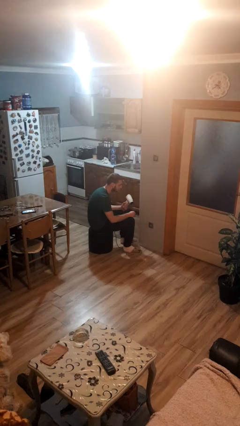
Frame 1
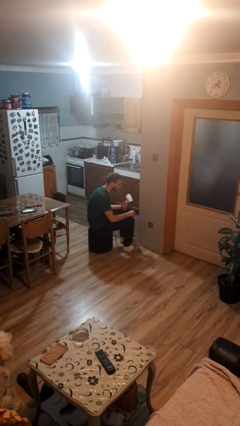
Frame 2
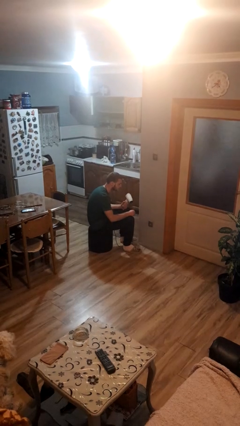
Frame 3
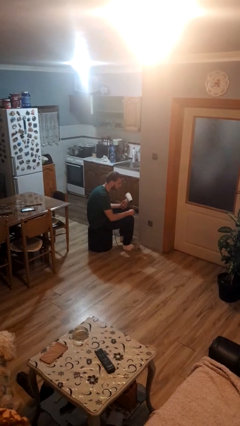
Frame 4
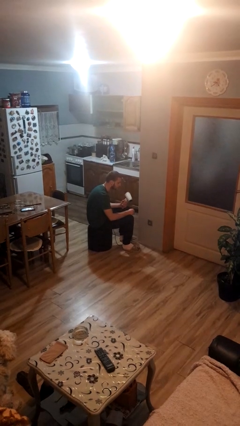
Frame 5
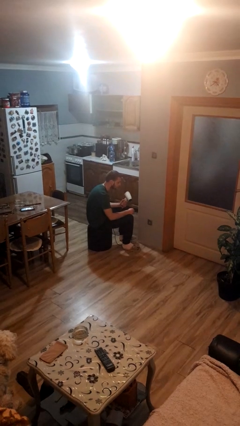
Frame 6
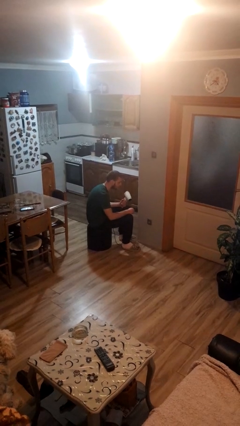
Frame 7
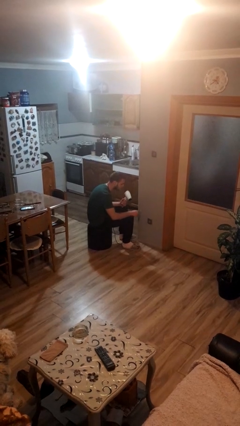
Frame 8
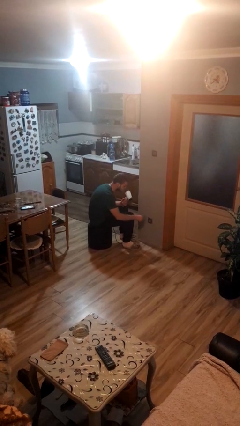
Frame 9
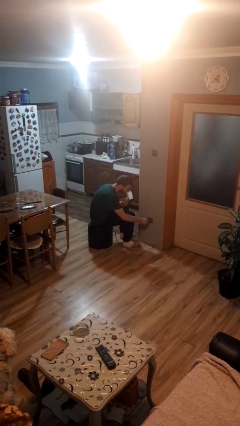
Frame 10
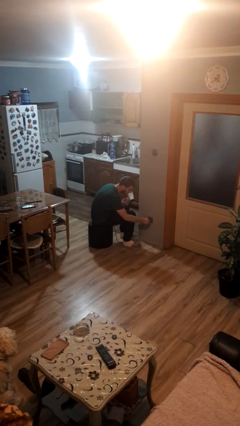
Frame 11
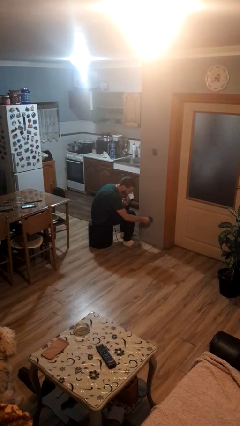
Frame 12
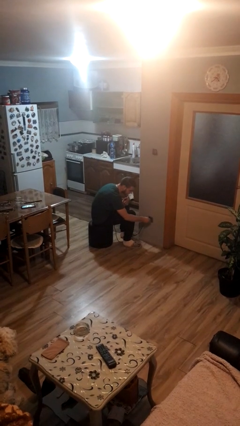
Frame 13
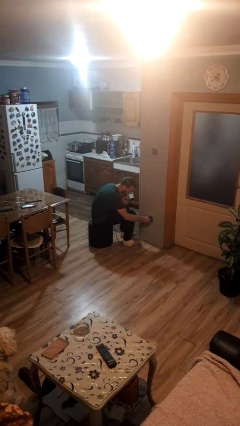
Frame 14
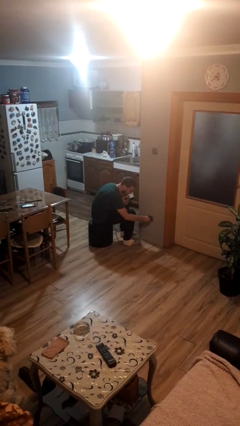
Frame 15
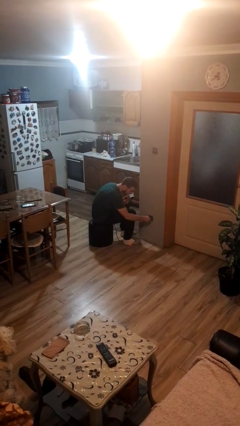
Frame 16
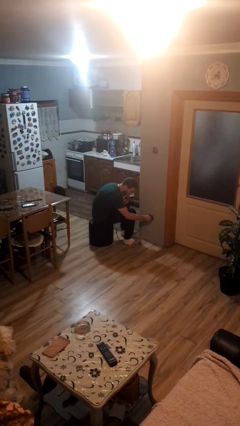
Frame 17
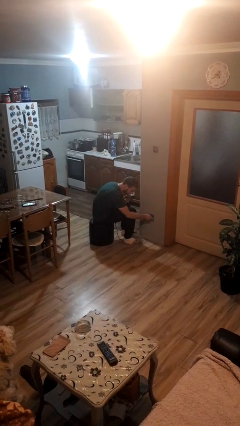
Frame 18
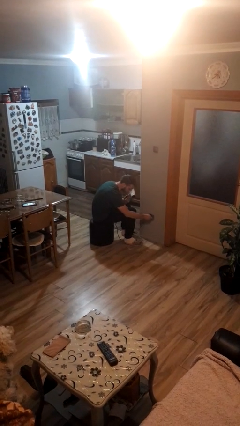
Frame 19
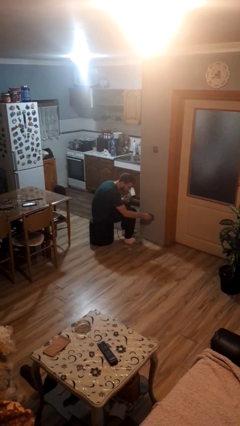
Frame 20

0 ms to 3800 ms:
person plugs into electrical socket

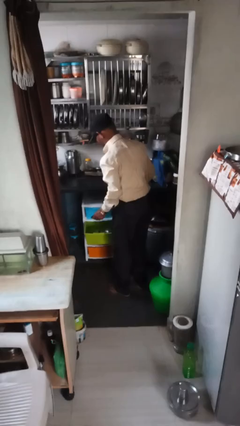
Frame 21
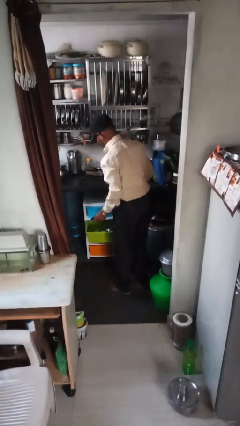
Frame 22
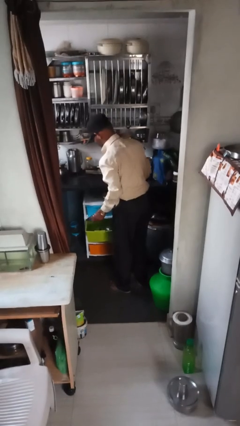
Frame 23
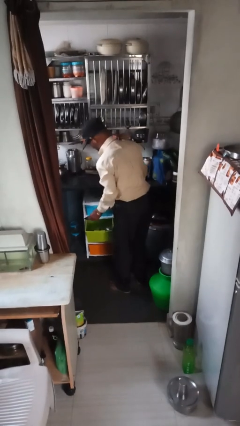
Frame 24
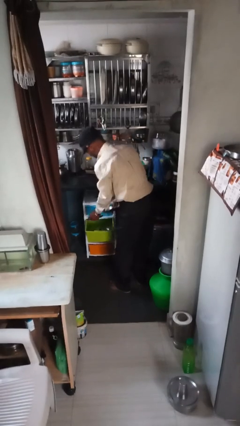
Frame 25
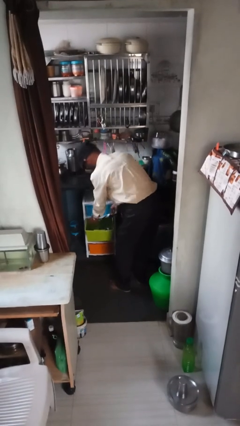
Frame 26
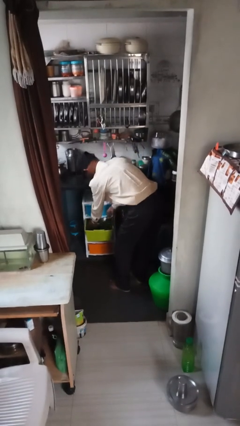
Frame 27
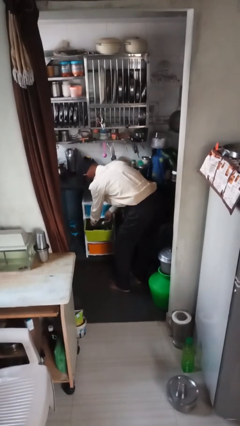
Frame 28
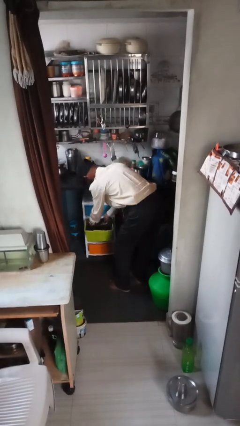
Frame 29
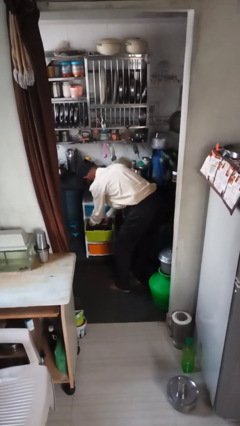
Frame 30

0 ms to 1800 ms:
person puts object into kitchen drawer

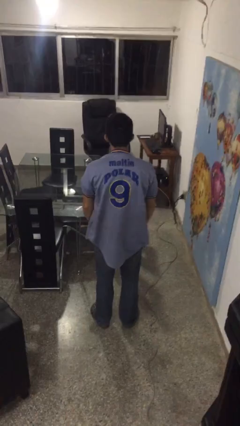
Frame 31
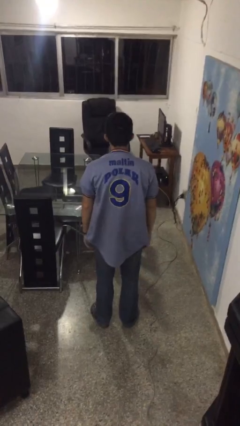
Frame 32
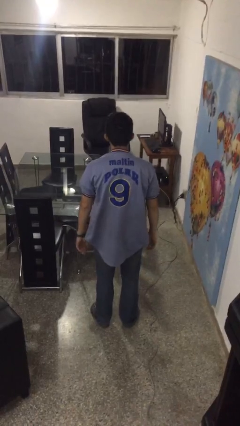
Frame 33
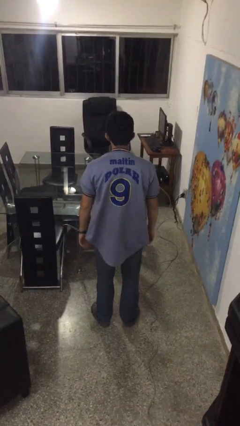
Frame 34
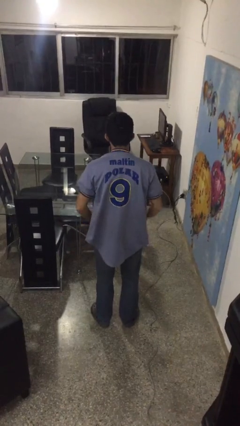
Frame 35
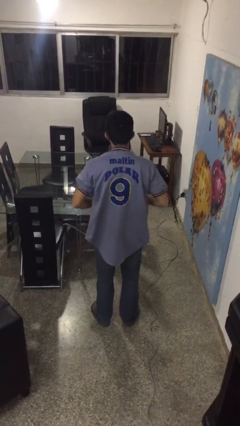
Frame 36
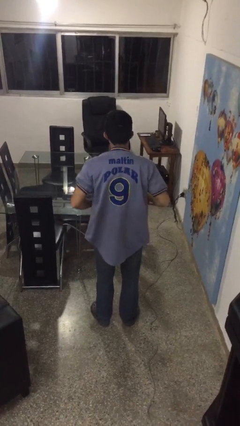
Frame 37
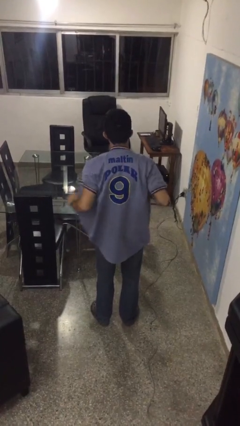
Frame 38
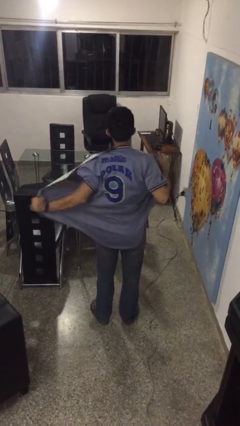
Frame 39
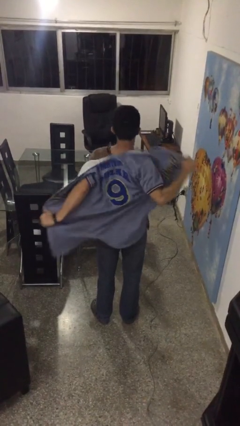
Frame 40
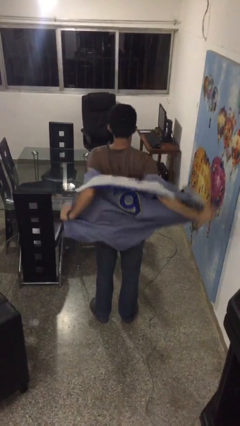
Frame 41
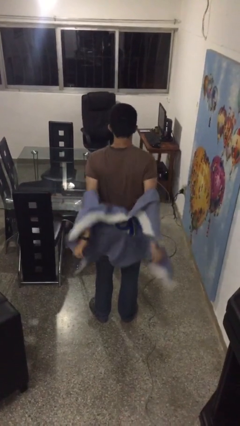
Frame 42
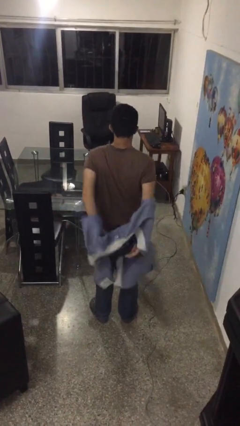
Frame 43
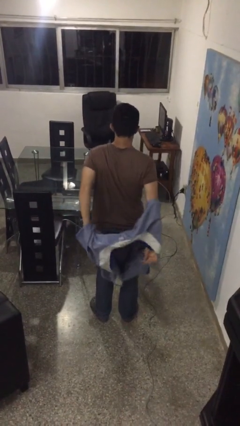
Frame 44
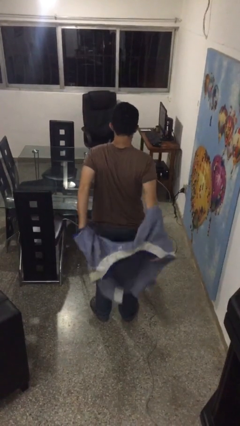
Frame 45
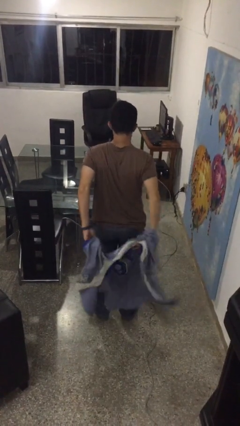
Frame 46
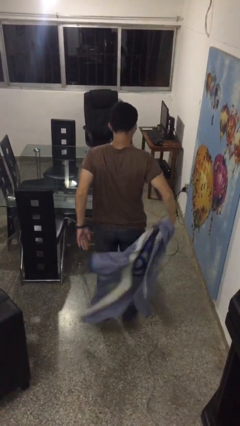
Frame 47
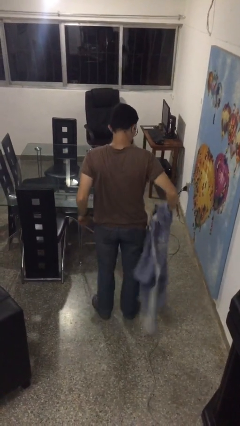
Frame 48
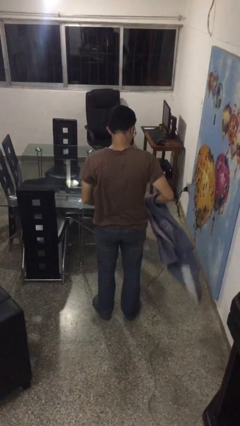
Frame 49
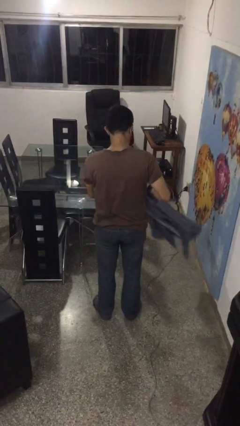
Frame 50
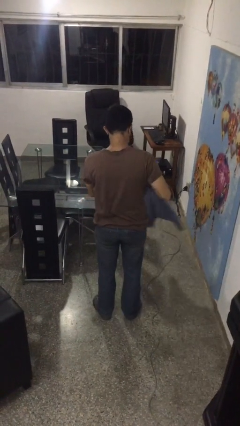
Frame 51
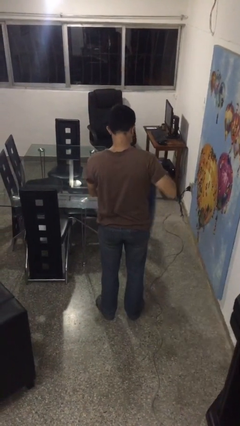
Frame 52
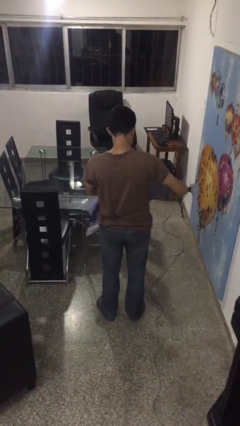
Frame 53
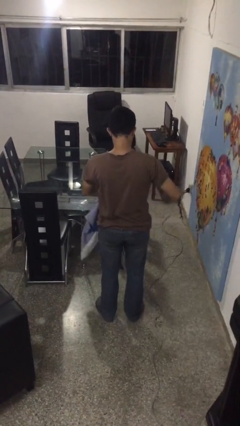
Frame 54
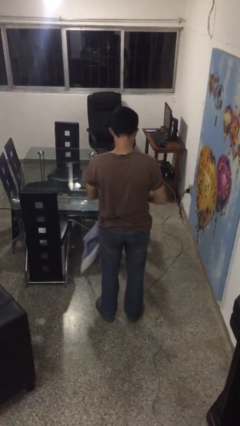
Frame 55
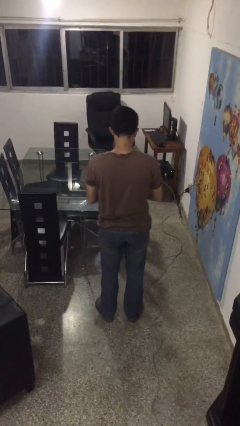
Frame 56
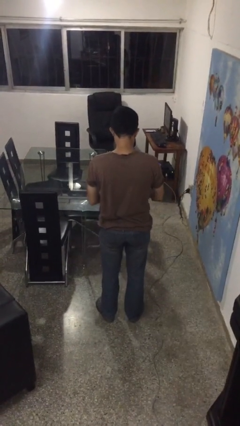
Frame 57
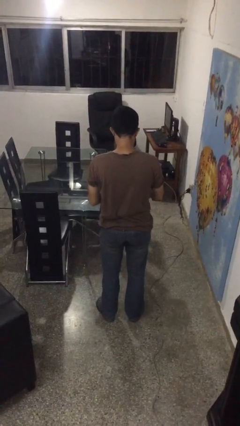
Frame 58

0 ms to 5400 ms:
person takes off shirt

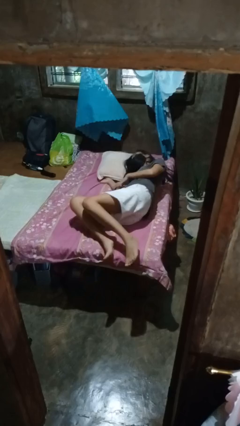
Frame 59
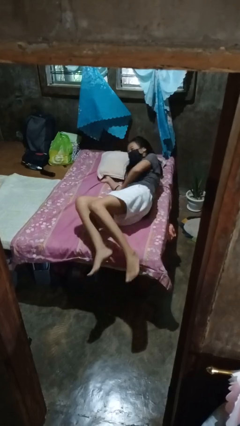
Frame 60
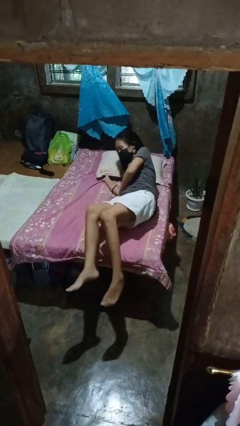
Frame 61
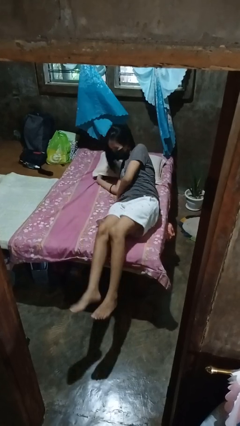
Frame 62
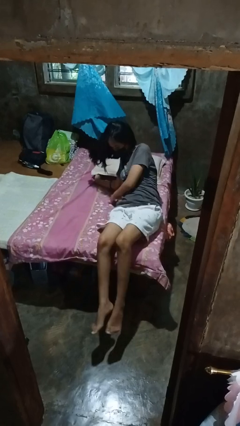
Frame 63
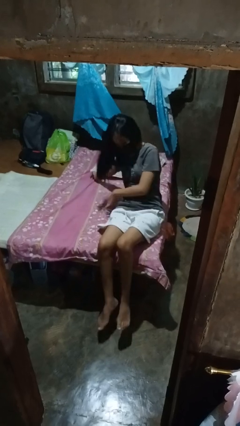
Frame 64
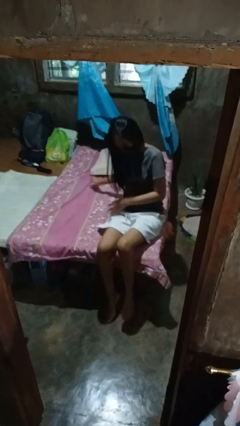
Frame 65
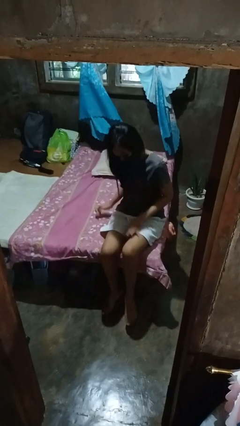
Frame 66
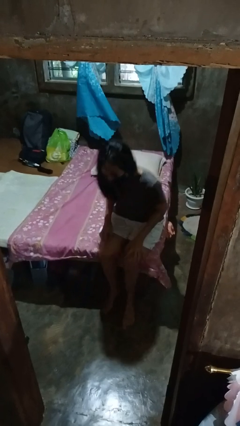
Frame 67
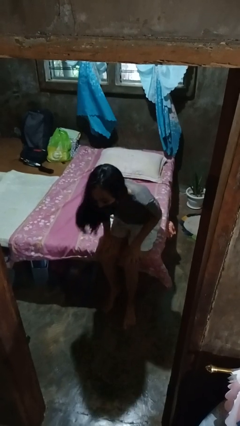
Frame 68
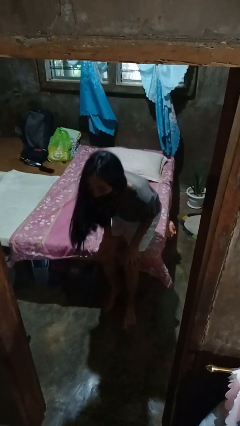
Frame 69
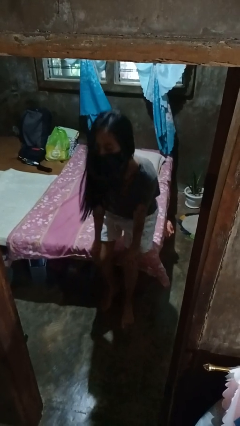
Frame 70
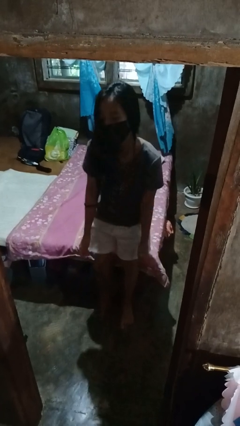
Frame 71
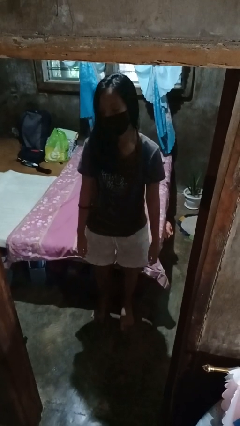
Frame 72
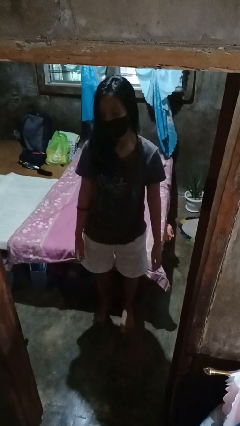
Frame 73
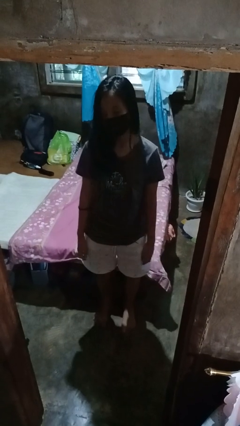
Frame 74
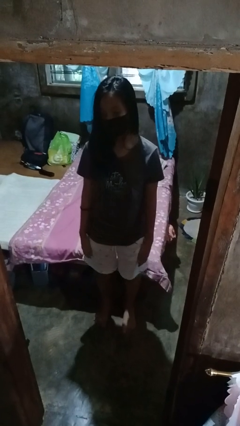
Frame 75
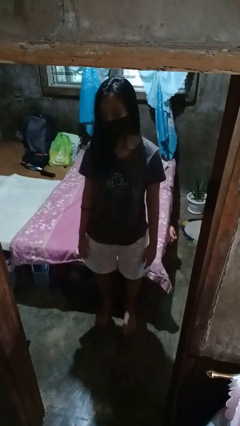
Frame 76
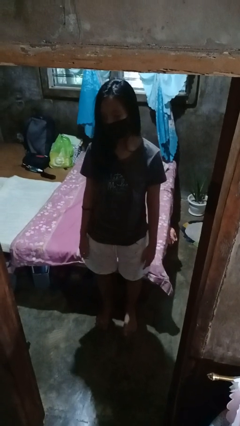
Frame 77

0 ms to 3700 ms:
person stands up

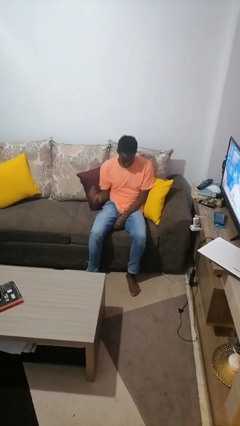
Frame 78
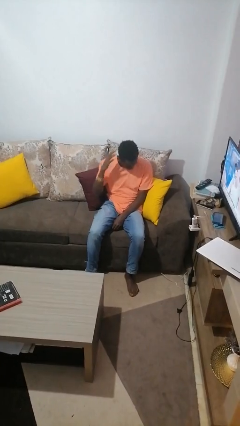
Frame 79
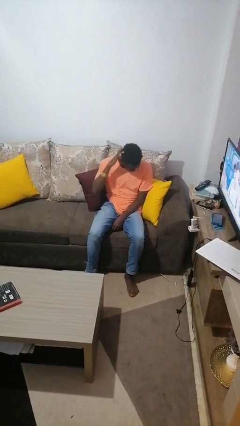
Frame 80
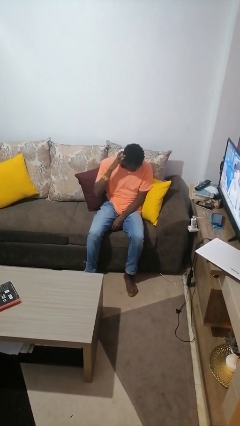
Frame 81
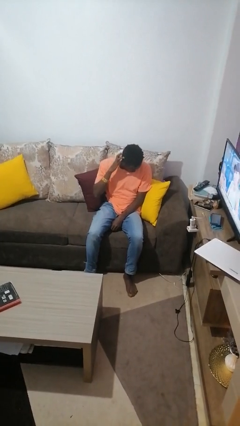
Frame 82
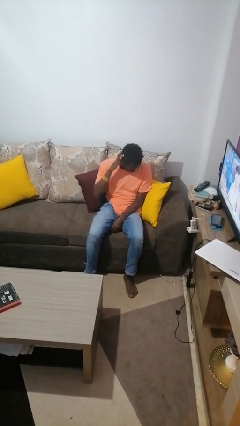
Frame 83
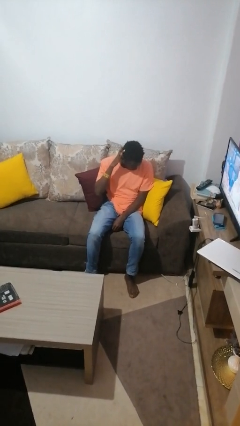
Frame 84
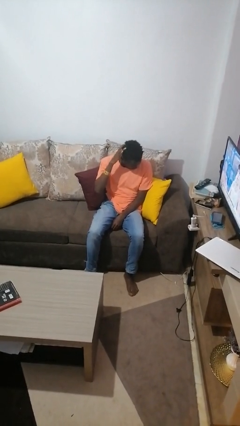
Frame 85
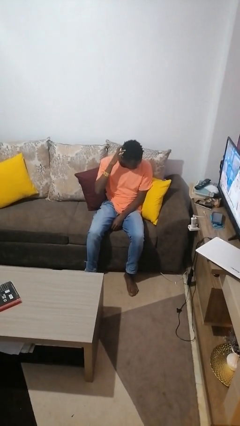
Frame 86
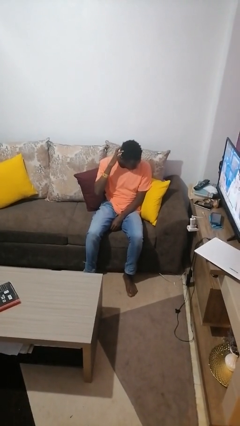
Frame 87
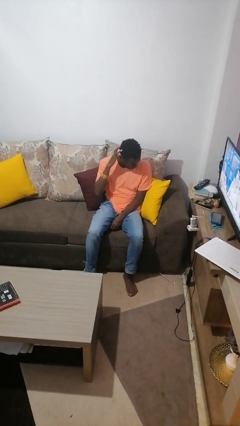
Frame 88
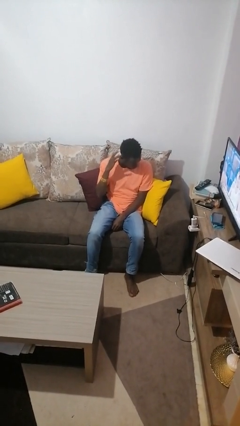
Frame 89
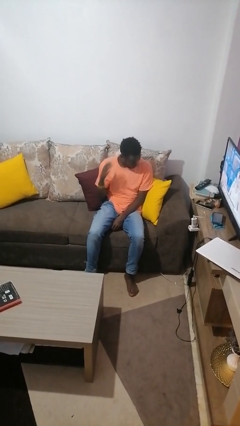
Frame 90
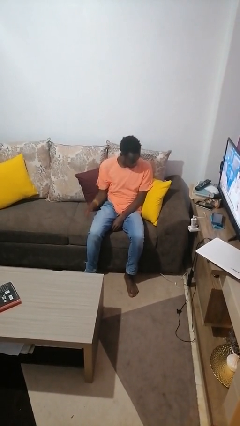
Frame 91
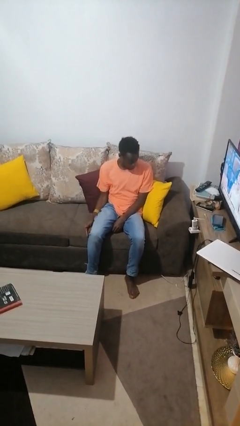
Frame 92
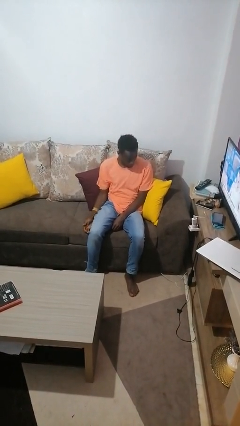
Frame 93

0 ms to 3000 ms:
person strokes hair
